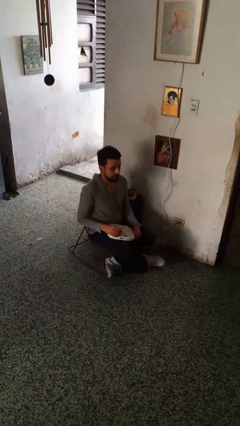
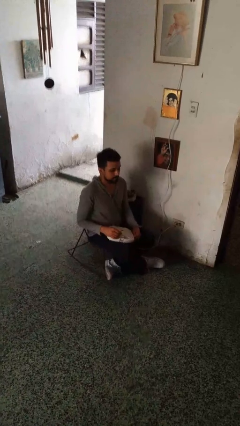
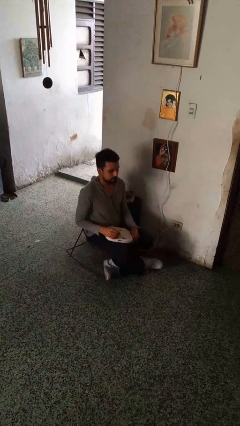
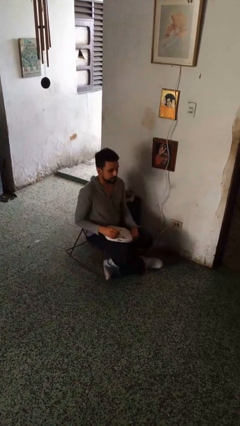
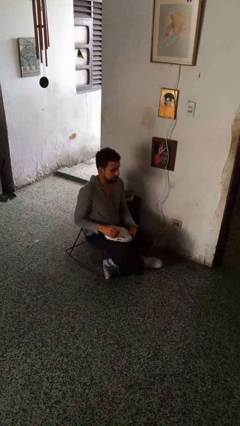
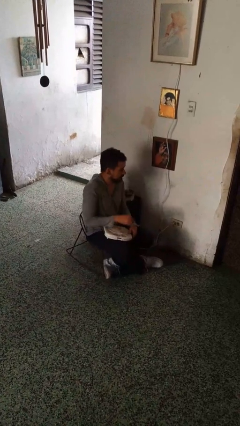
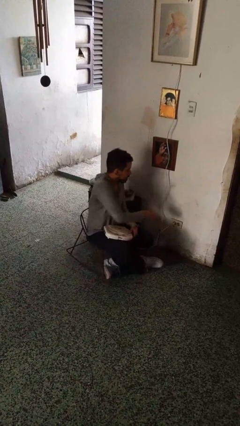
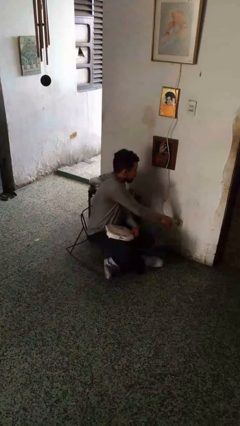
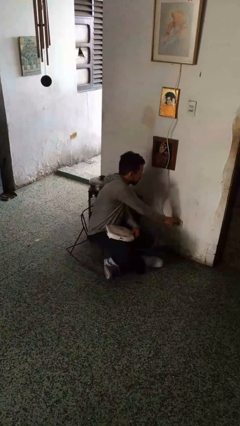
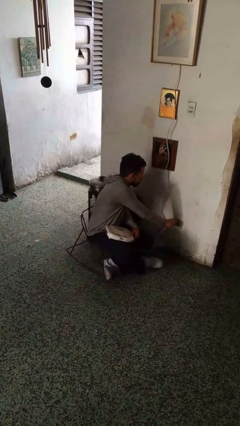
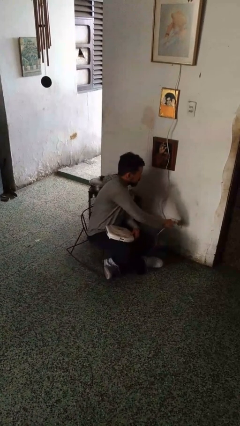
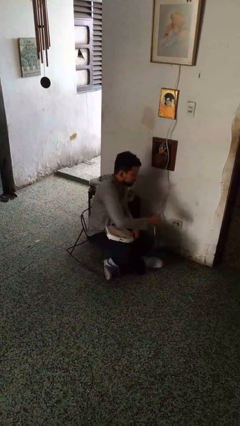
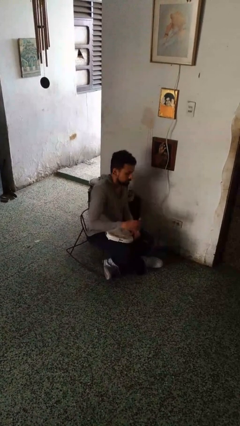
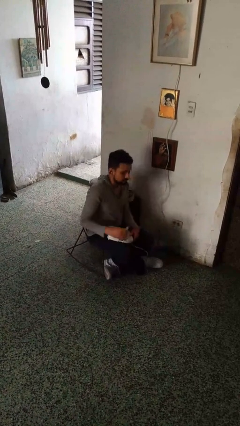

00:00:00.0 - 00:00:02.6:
person unplugs from electrical socket

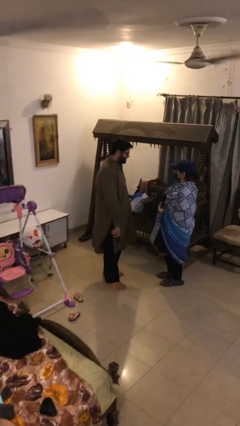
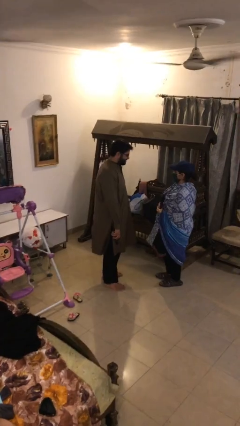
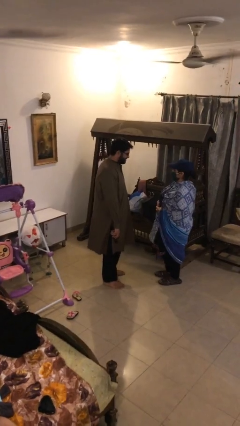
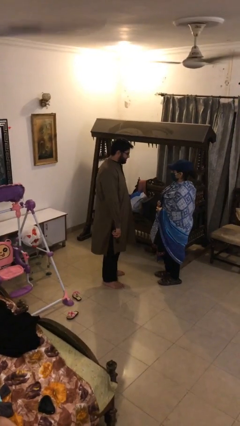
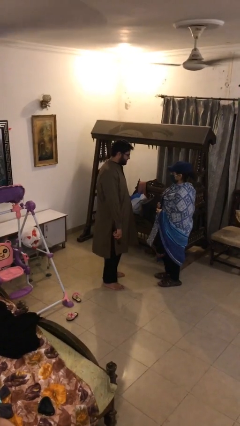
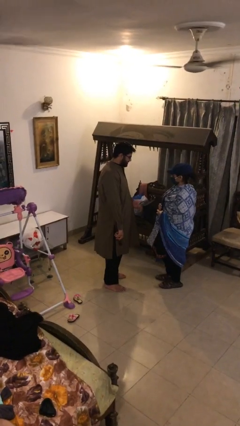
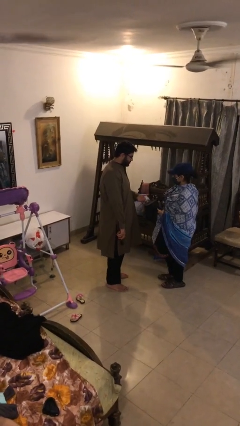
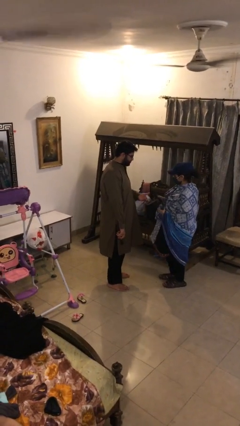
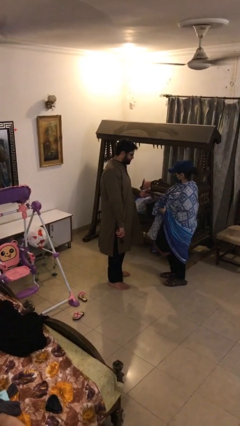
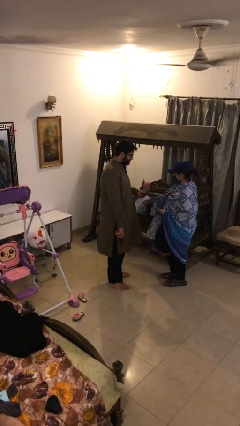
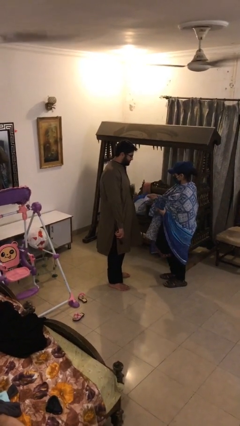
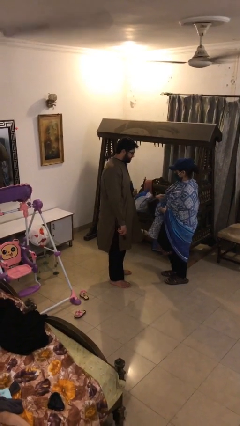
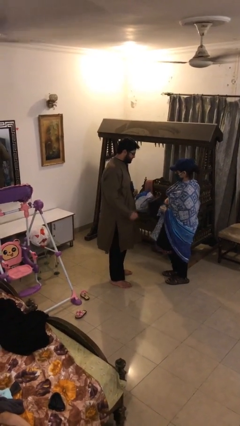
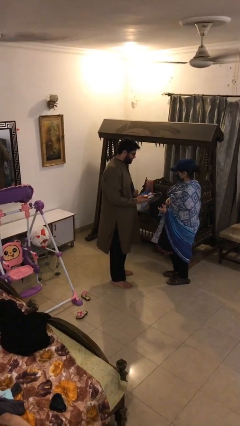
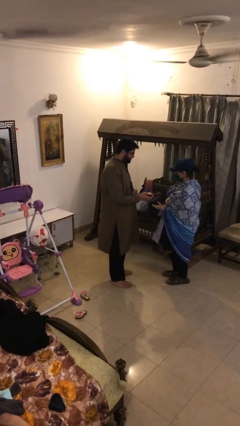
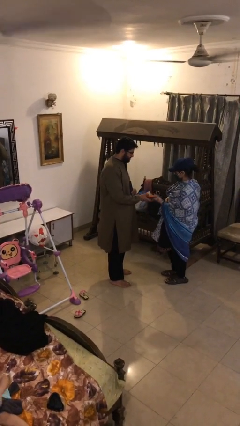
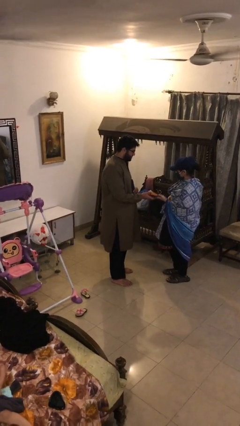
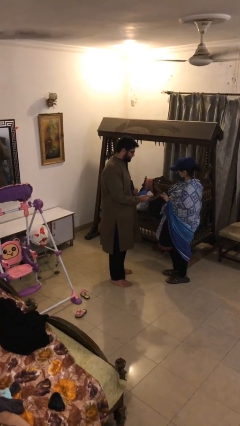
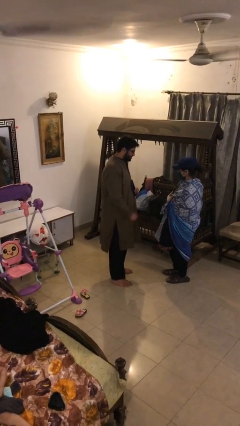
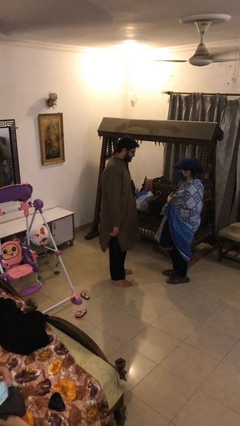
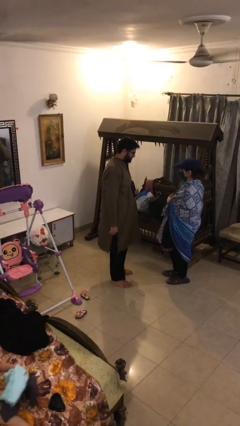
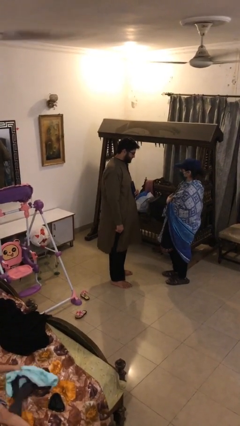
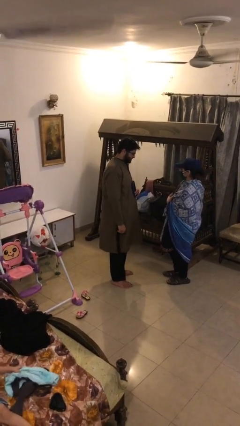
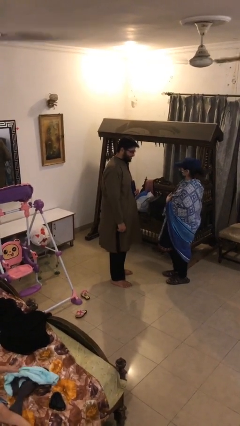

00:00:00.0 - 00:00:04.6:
person transfers object to person

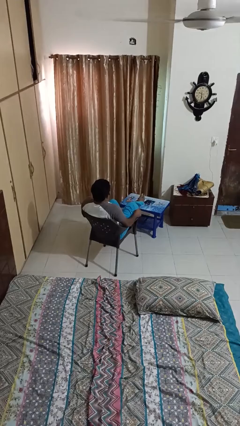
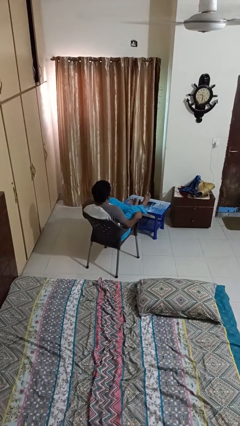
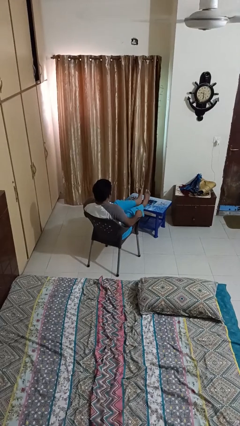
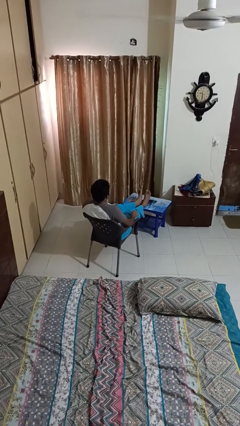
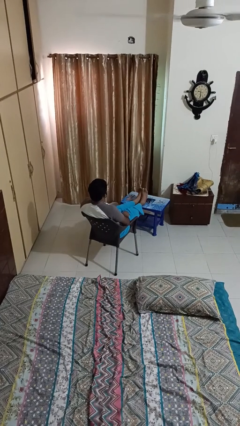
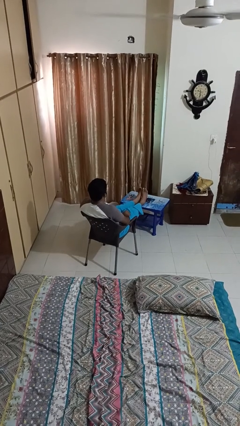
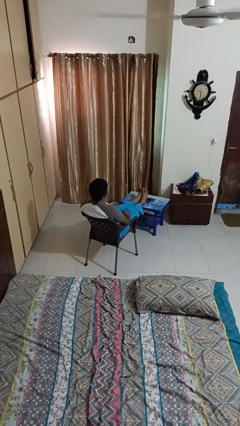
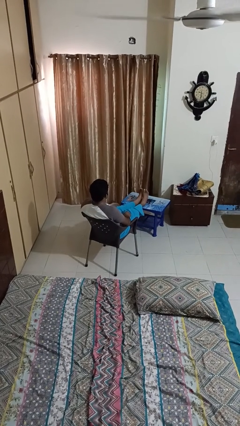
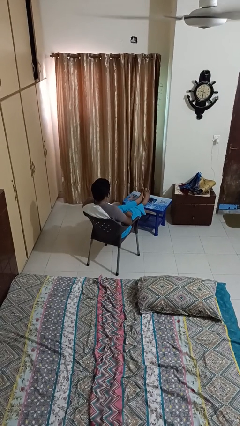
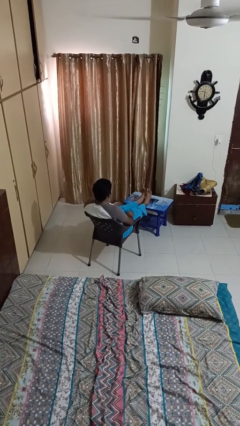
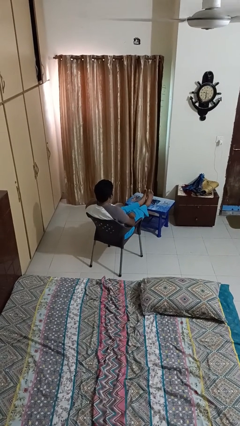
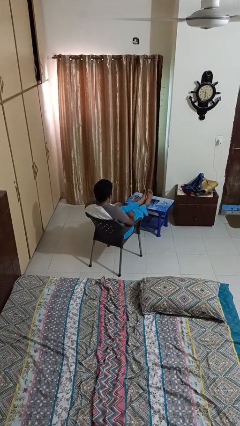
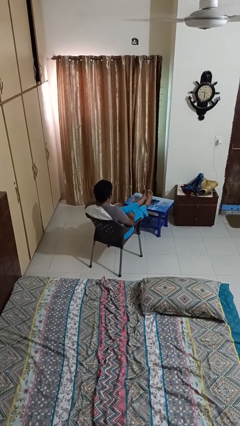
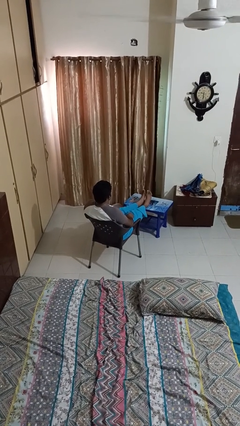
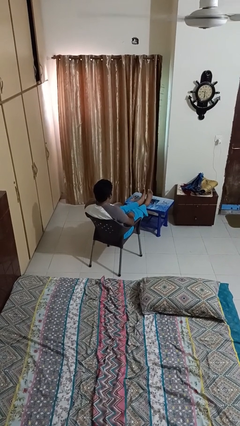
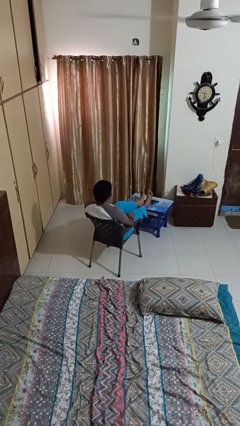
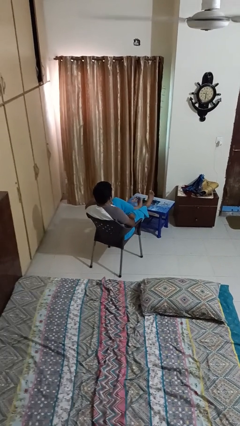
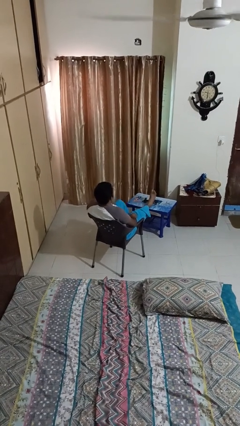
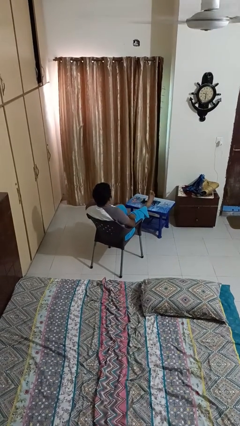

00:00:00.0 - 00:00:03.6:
person puts feet up

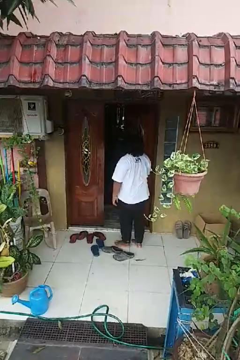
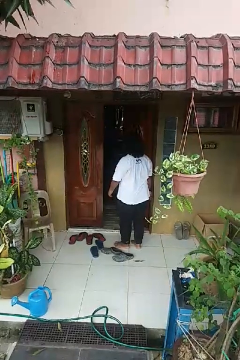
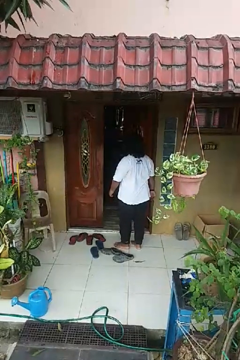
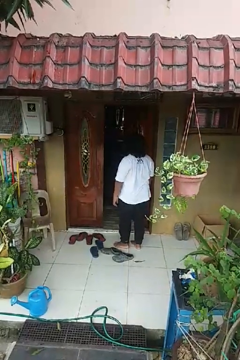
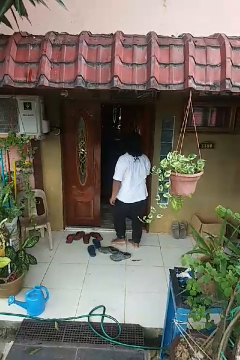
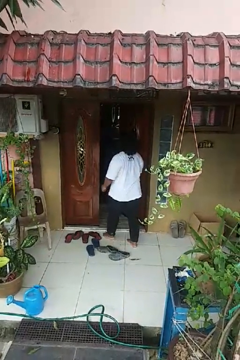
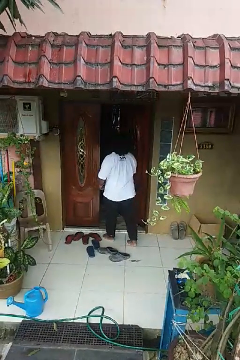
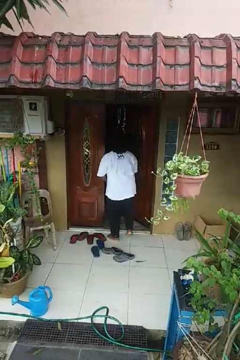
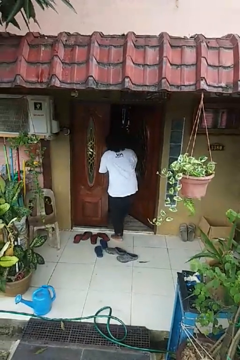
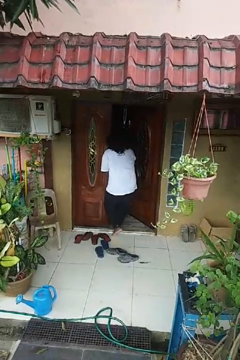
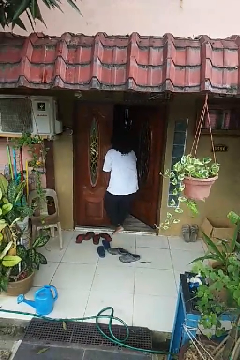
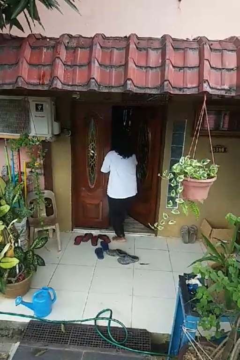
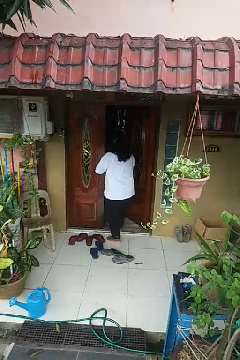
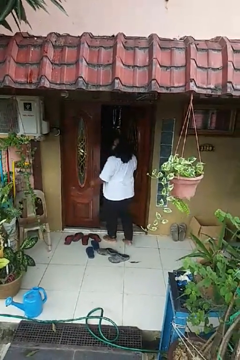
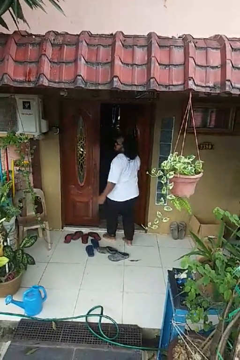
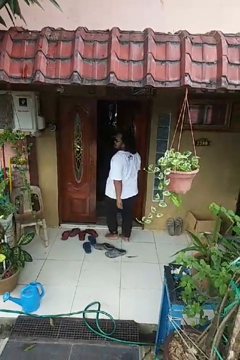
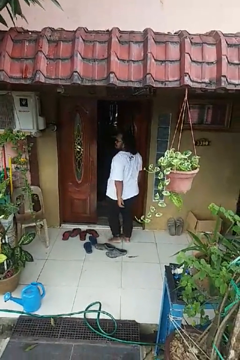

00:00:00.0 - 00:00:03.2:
person bumps into wall

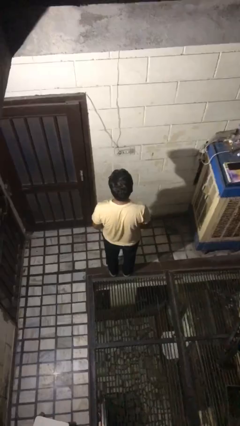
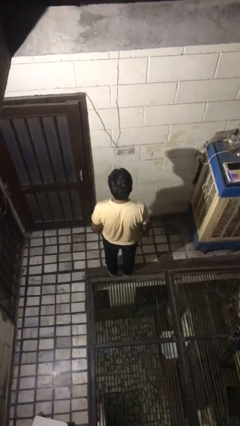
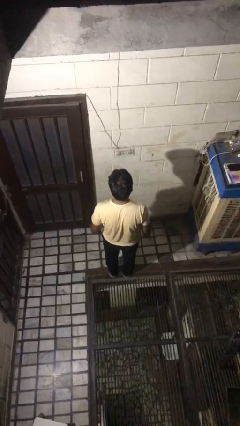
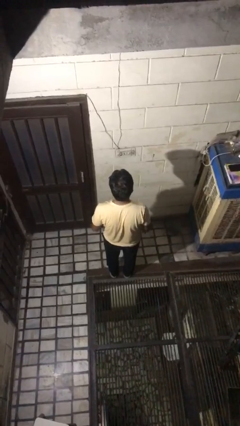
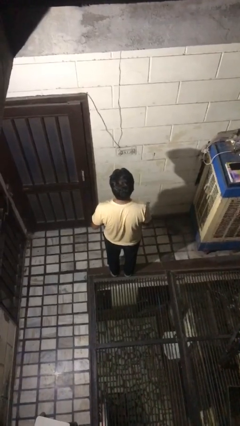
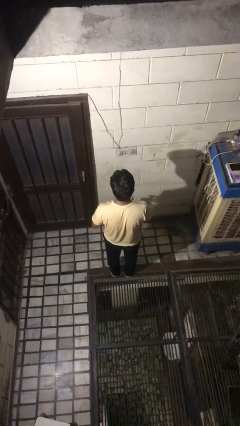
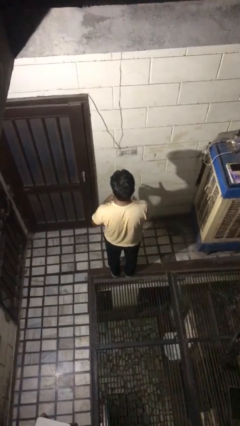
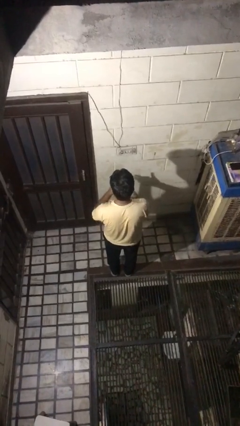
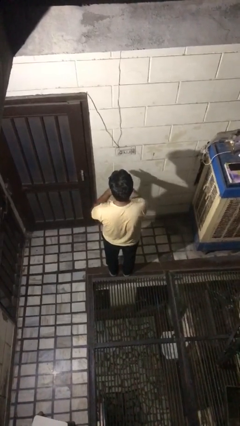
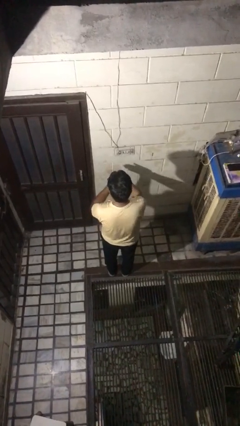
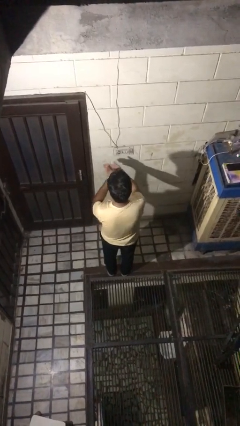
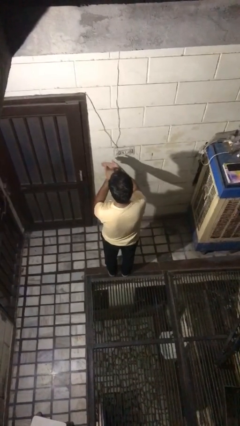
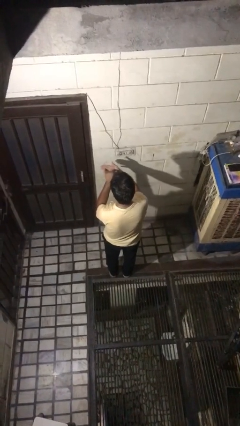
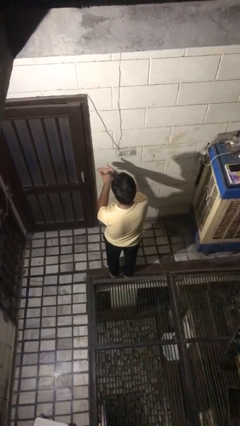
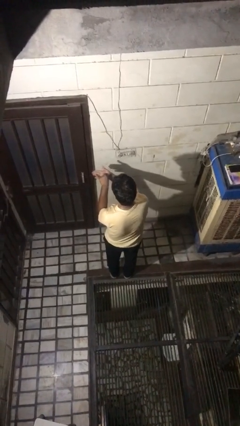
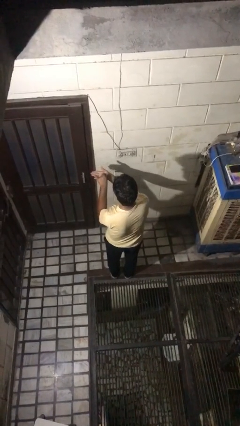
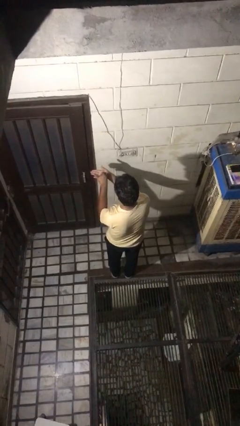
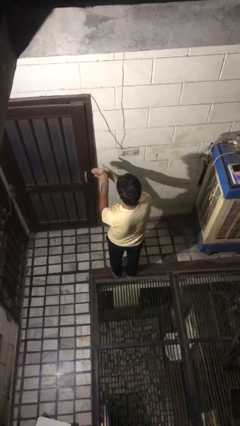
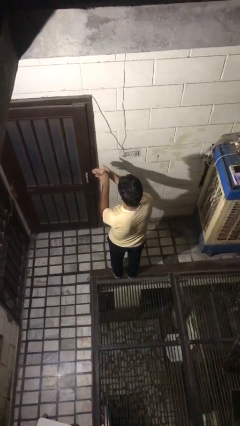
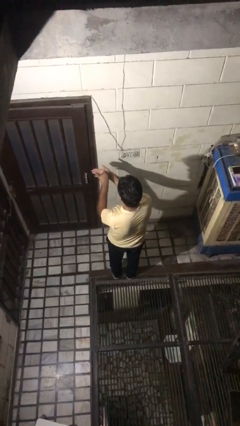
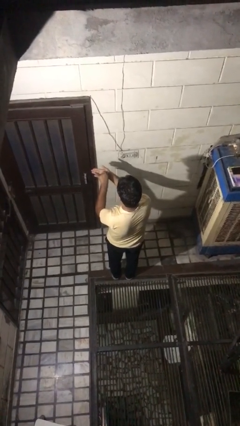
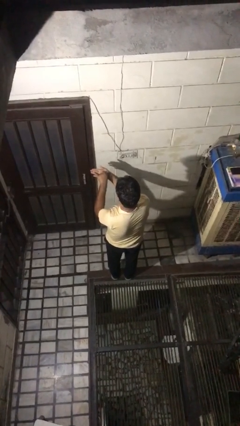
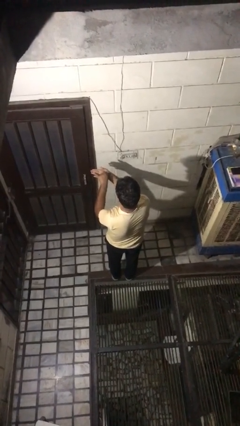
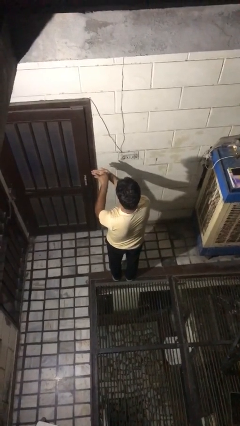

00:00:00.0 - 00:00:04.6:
person gestures hang loose
